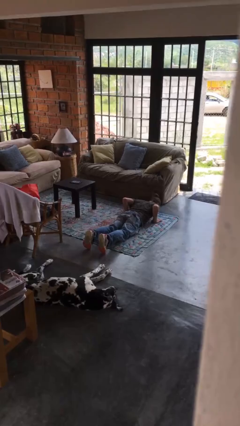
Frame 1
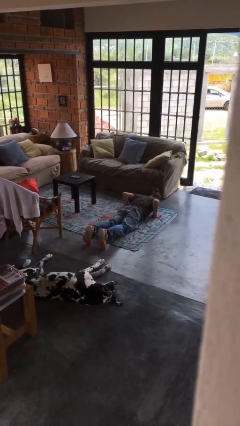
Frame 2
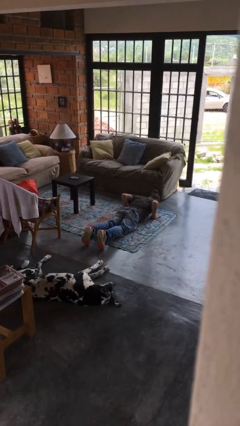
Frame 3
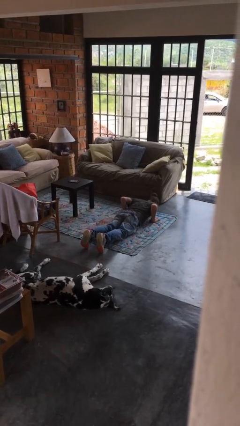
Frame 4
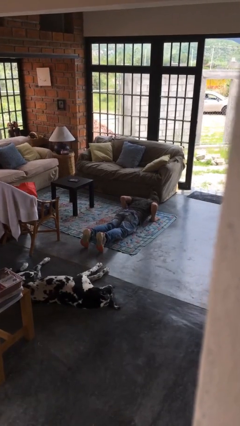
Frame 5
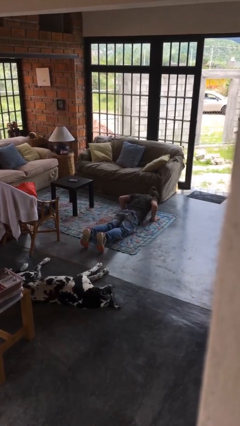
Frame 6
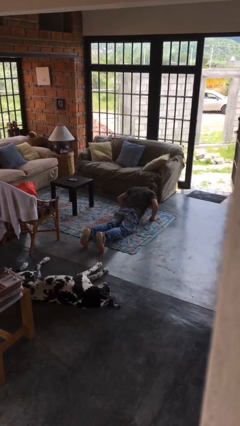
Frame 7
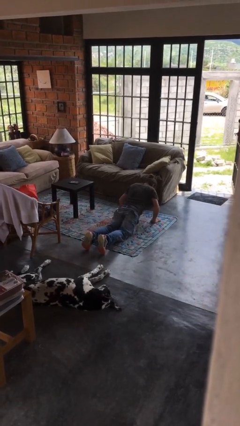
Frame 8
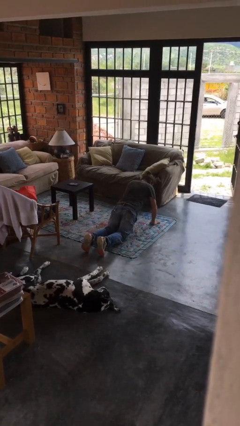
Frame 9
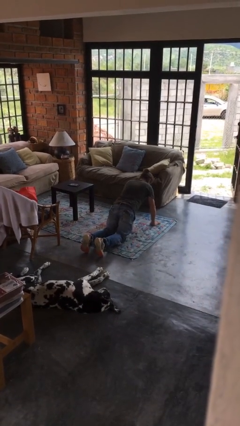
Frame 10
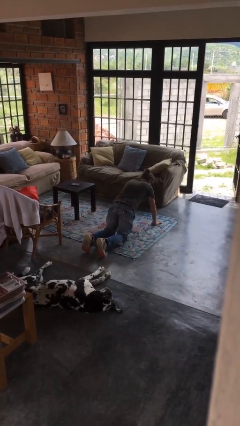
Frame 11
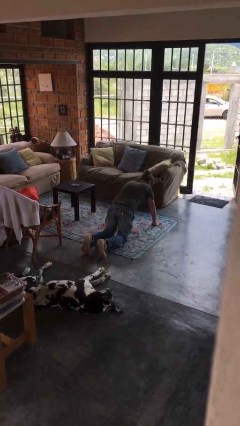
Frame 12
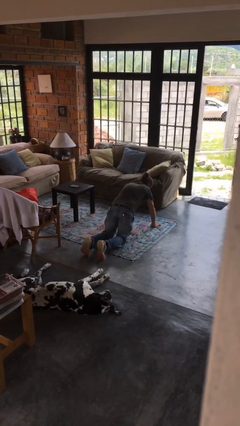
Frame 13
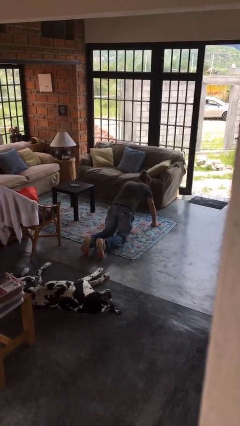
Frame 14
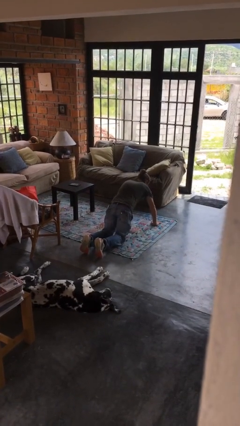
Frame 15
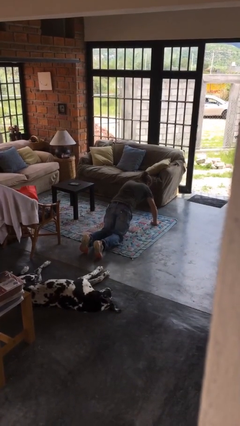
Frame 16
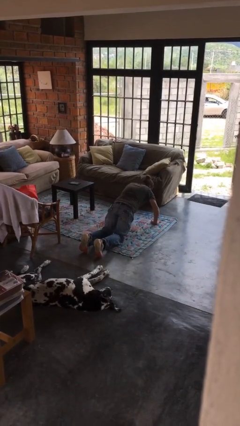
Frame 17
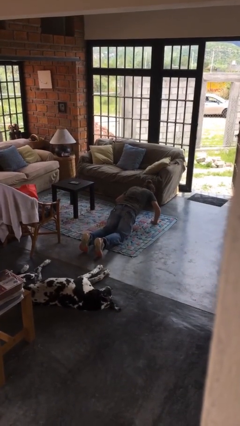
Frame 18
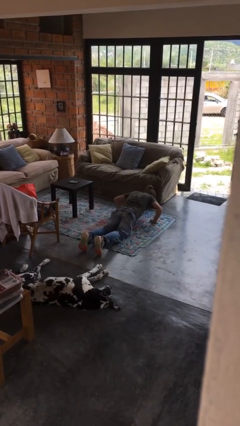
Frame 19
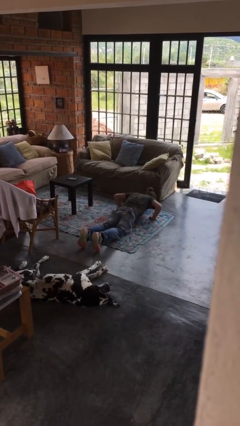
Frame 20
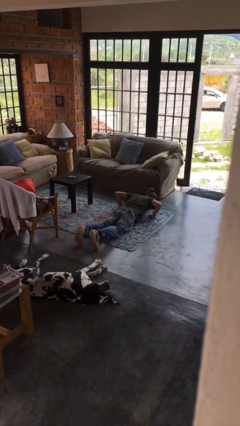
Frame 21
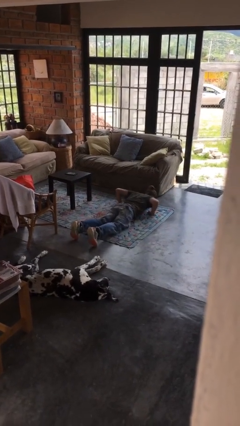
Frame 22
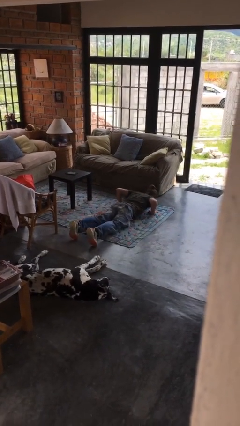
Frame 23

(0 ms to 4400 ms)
person exercises with pushup

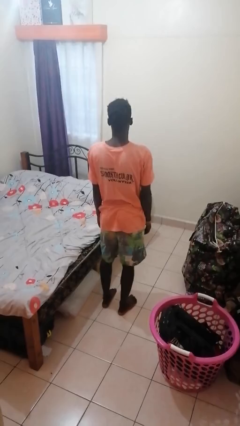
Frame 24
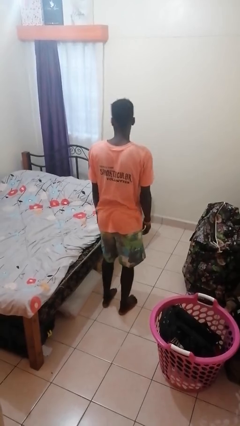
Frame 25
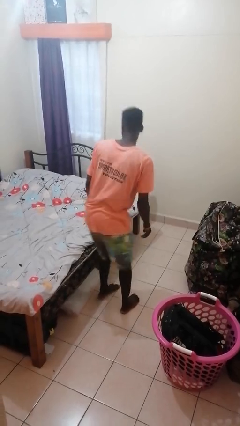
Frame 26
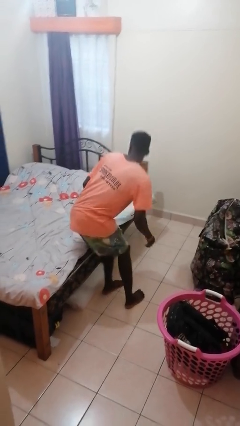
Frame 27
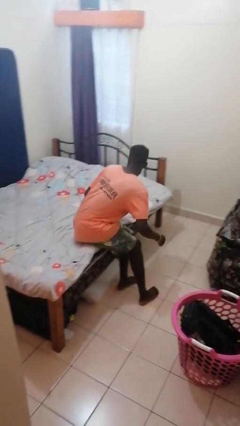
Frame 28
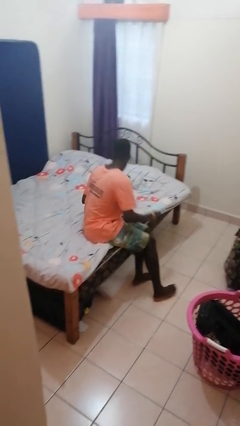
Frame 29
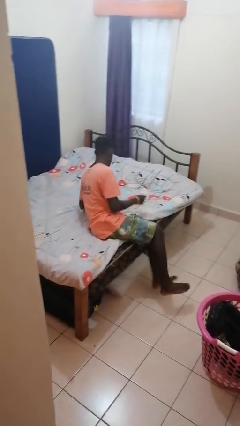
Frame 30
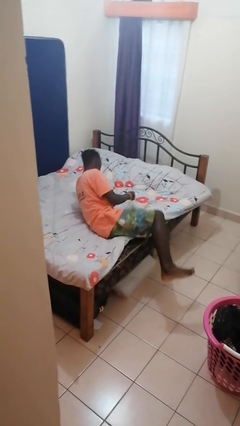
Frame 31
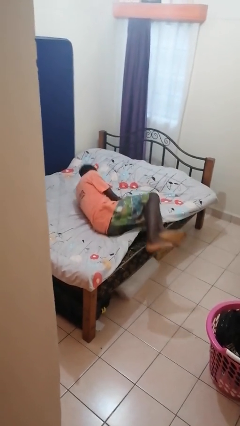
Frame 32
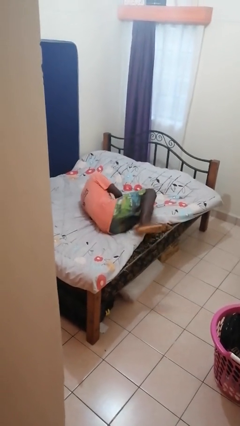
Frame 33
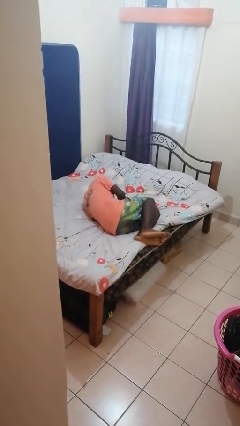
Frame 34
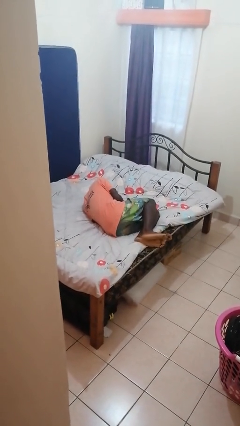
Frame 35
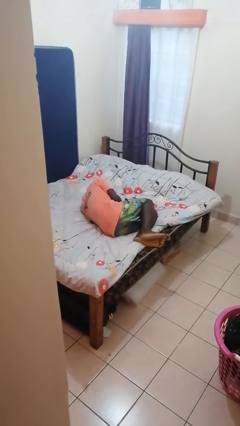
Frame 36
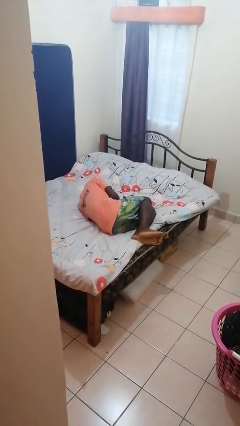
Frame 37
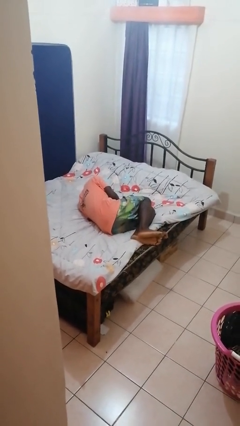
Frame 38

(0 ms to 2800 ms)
person lies down on bed

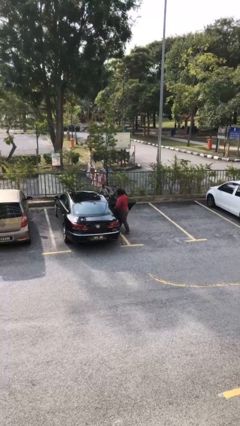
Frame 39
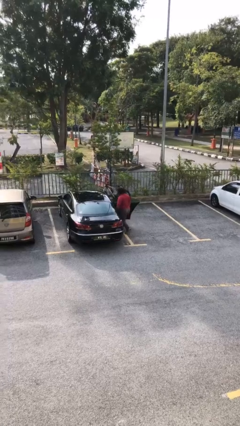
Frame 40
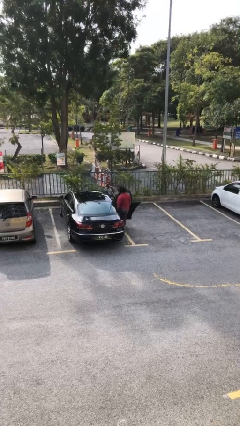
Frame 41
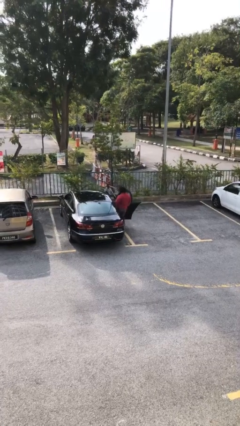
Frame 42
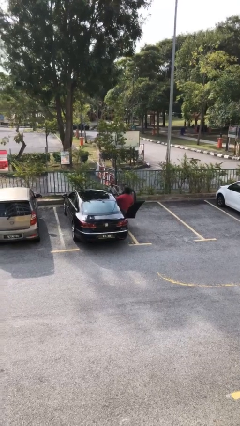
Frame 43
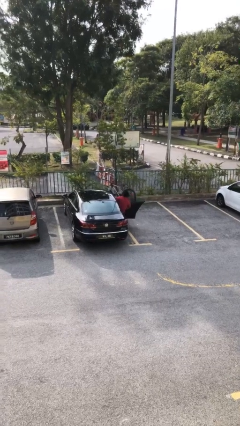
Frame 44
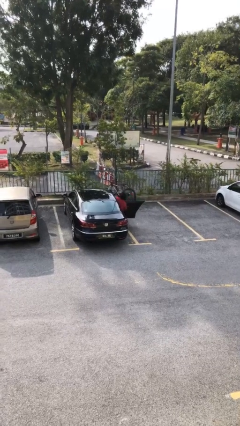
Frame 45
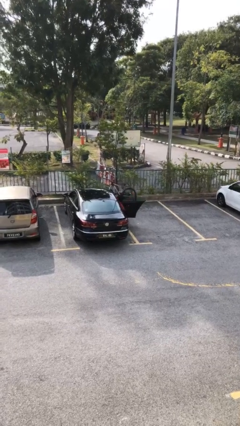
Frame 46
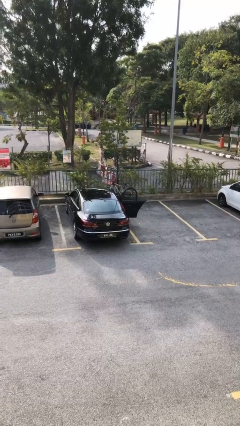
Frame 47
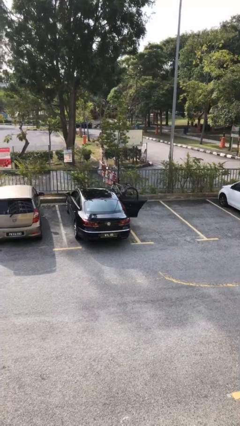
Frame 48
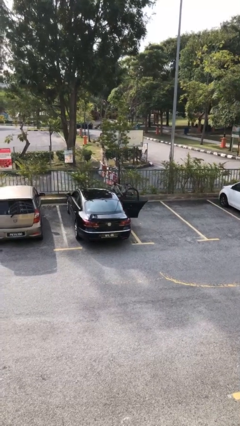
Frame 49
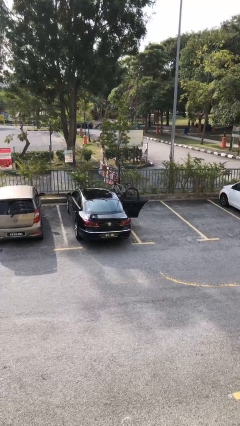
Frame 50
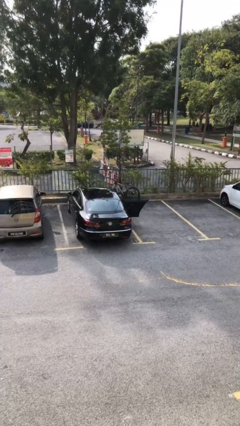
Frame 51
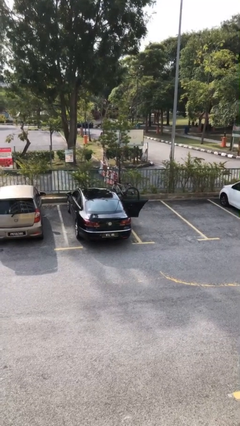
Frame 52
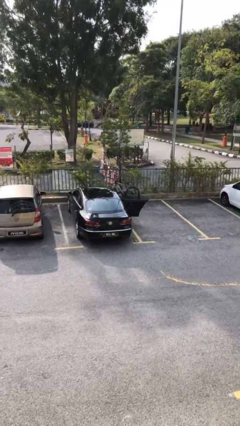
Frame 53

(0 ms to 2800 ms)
person enters car

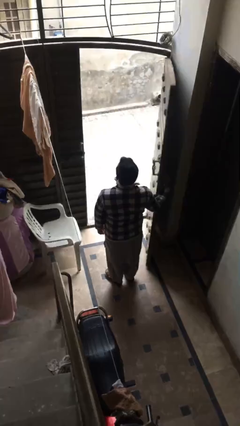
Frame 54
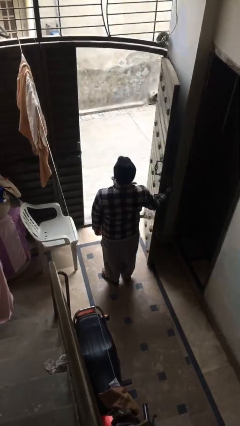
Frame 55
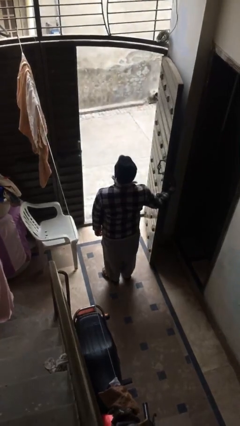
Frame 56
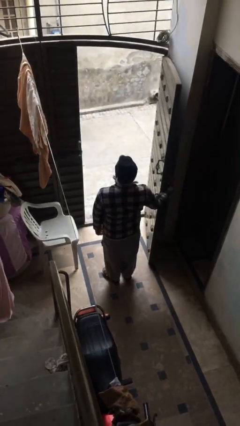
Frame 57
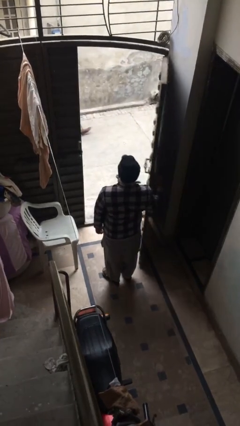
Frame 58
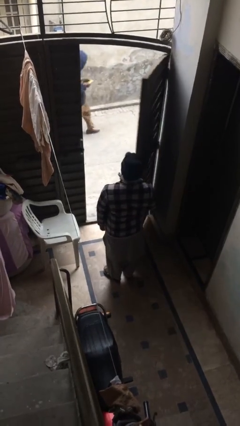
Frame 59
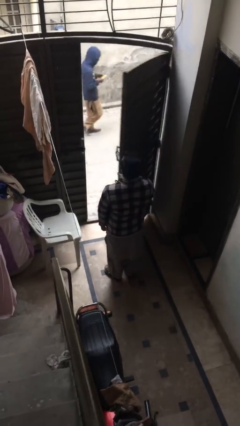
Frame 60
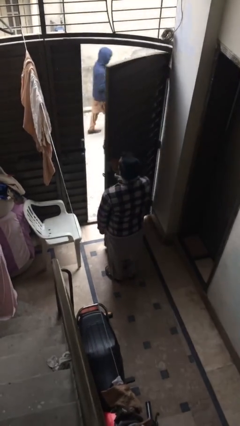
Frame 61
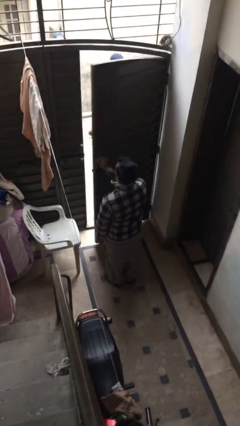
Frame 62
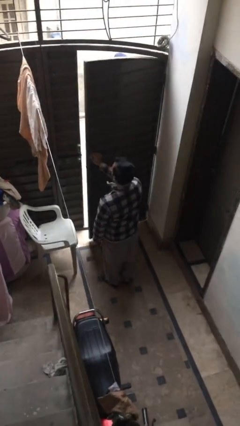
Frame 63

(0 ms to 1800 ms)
person closes facility door

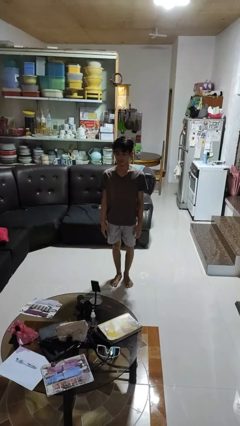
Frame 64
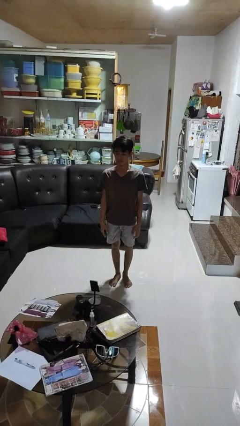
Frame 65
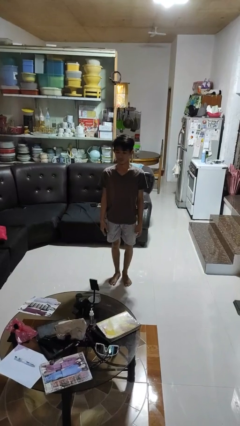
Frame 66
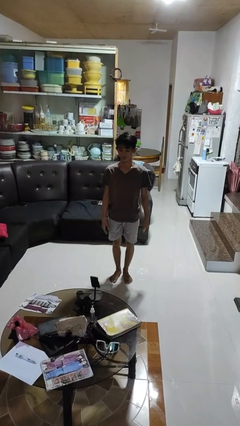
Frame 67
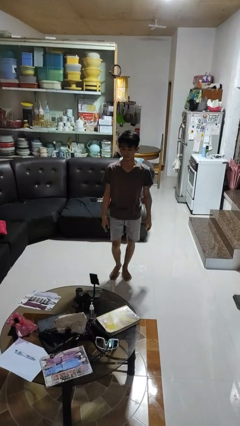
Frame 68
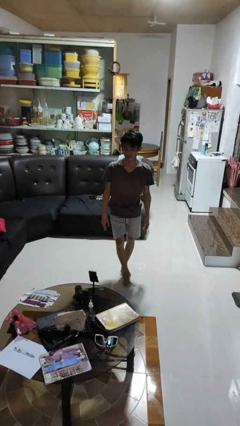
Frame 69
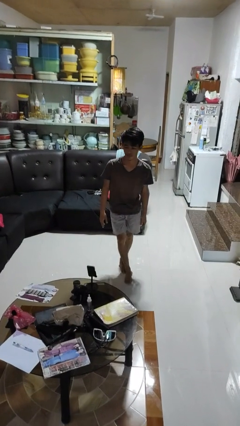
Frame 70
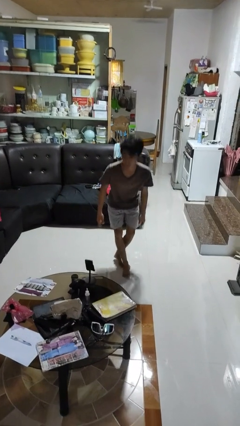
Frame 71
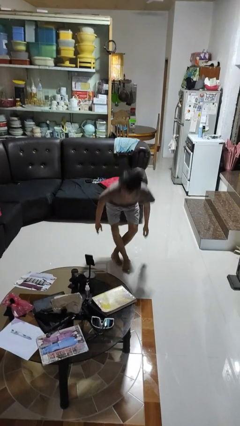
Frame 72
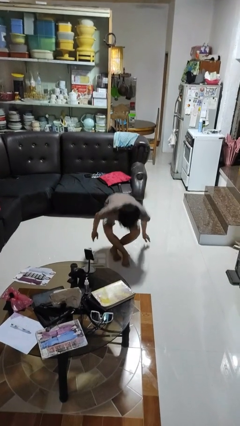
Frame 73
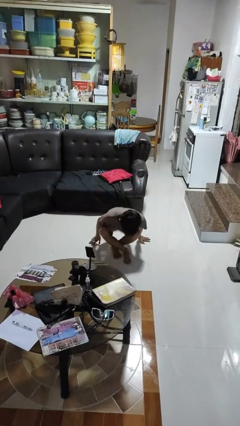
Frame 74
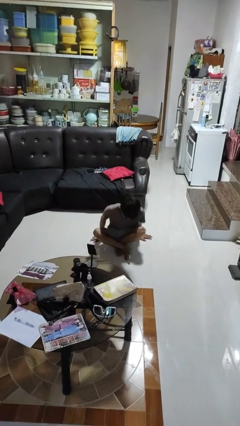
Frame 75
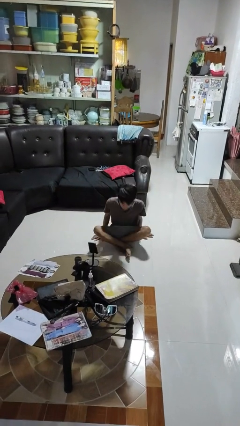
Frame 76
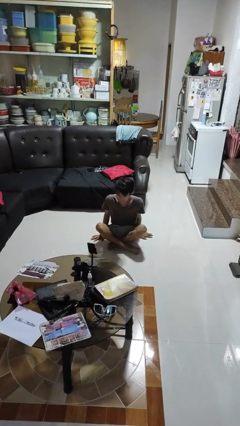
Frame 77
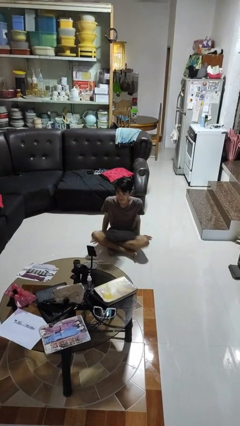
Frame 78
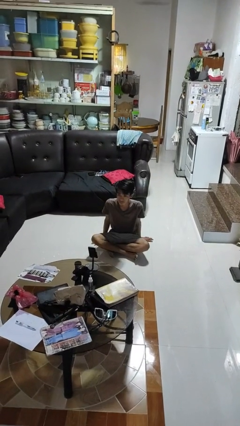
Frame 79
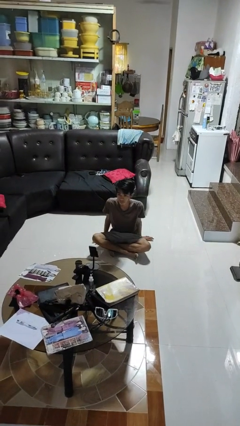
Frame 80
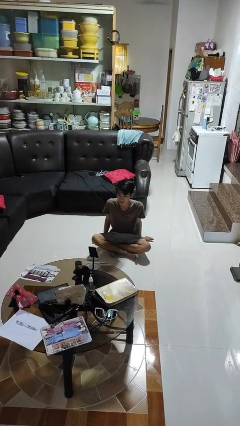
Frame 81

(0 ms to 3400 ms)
person sits crisscross

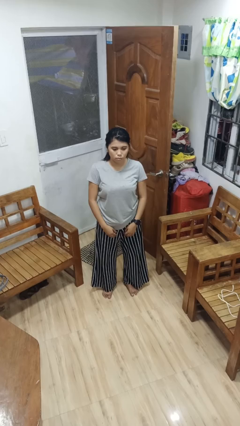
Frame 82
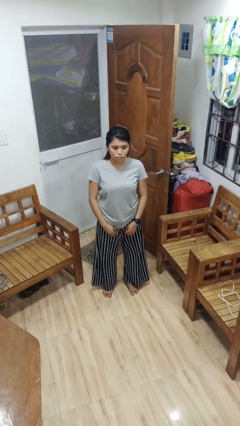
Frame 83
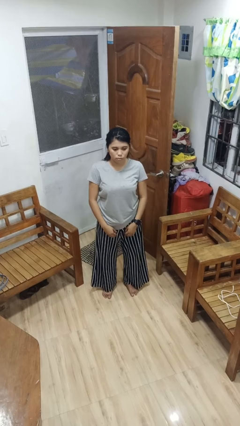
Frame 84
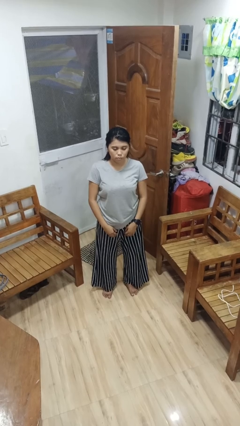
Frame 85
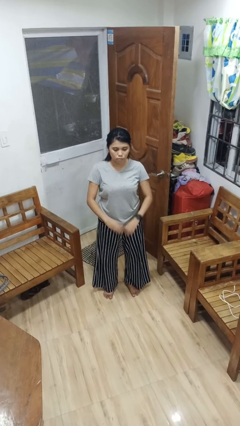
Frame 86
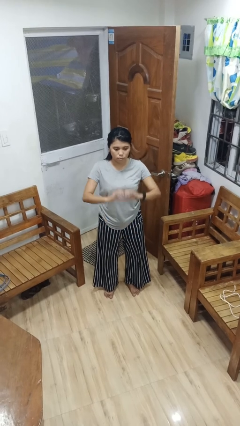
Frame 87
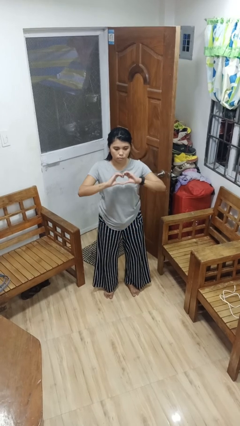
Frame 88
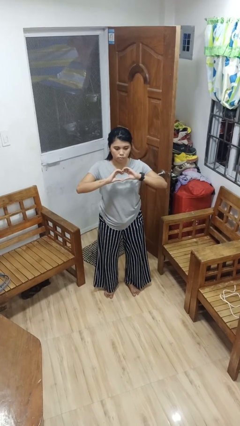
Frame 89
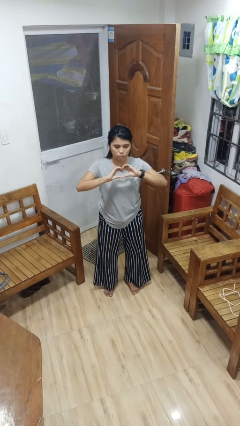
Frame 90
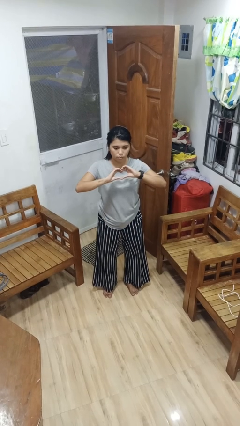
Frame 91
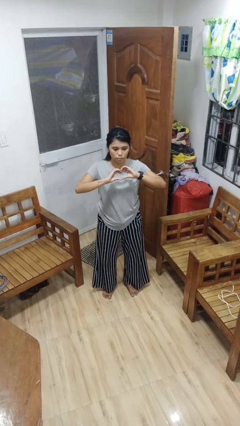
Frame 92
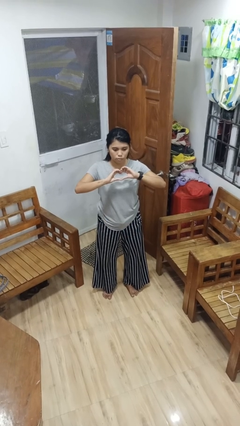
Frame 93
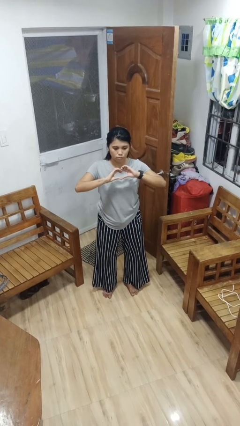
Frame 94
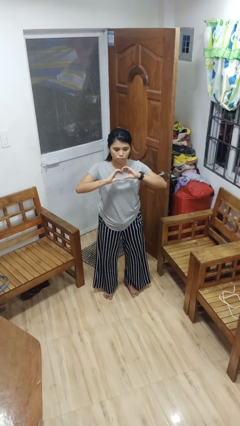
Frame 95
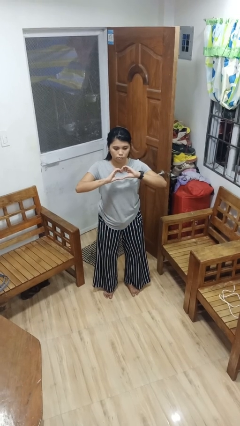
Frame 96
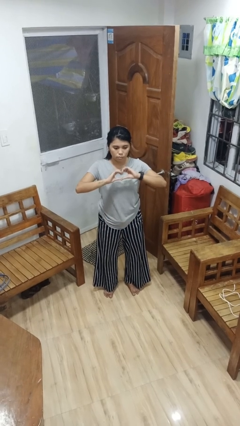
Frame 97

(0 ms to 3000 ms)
person gestures heart
